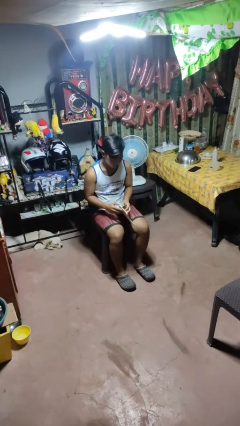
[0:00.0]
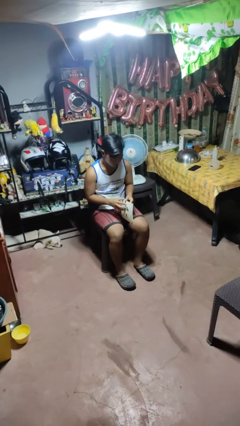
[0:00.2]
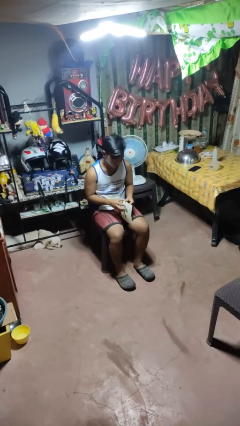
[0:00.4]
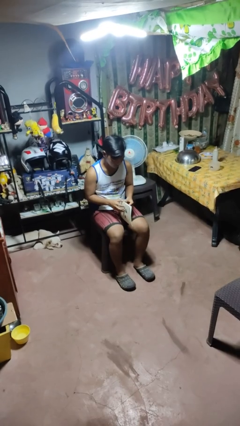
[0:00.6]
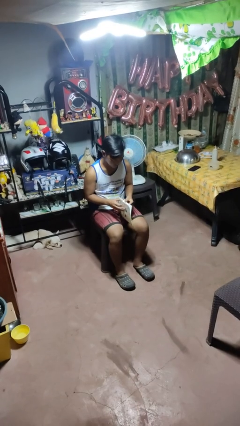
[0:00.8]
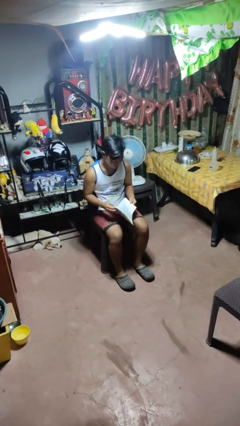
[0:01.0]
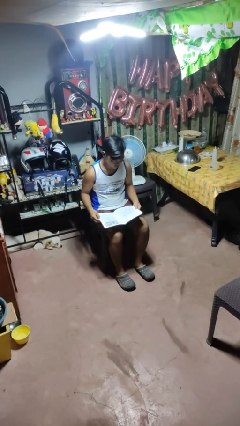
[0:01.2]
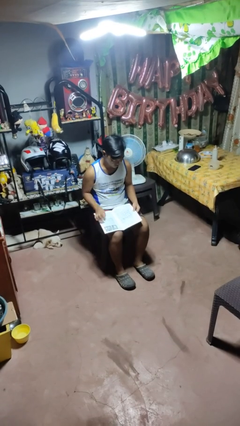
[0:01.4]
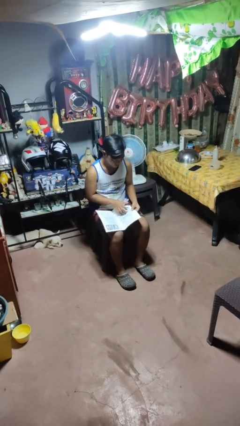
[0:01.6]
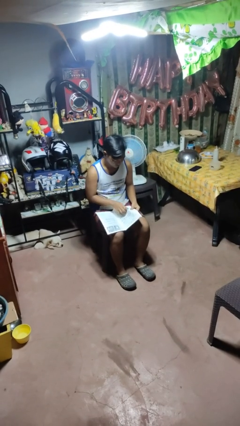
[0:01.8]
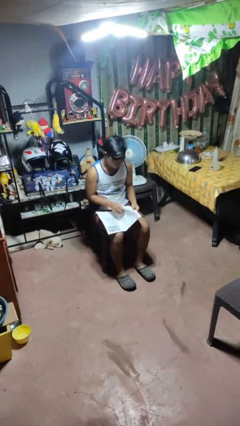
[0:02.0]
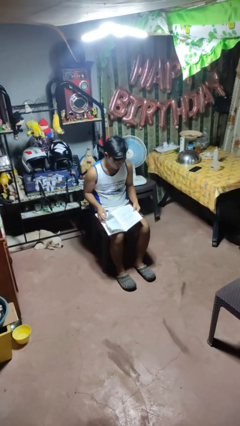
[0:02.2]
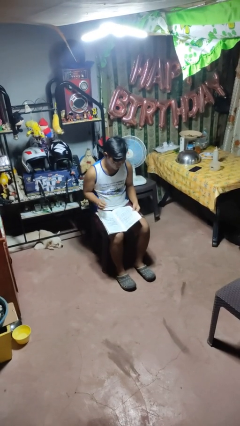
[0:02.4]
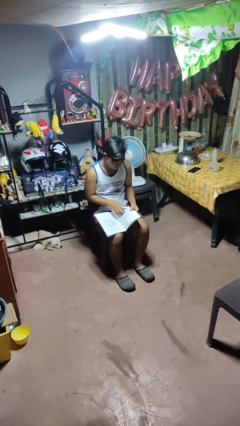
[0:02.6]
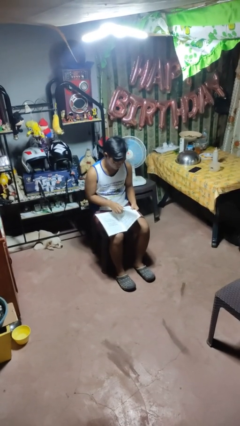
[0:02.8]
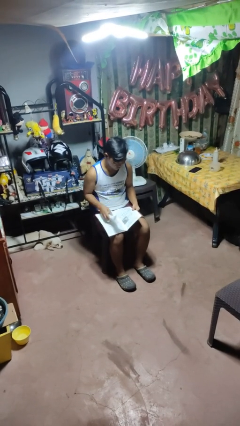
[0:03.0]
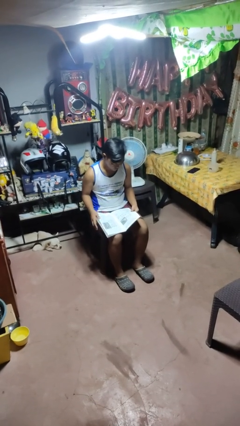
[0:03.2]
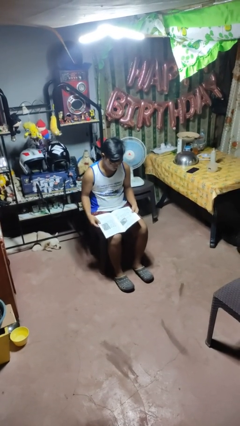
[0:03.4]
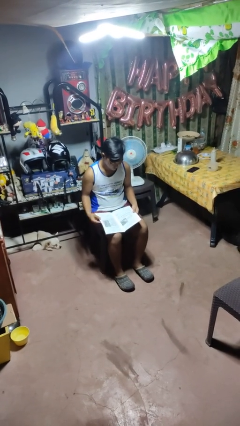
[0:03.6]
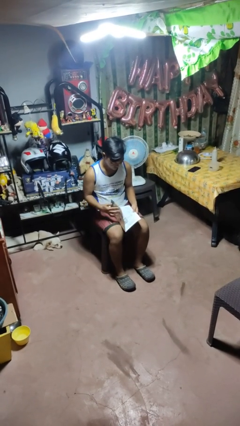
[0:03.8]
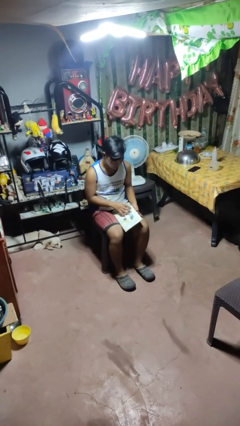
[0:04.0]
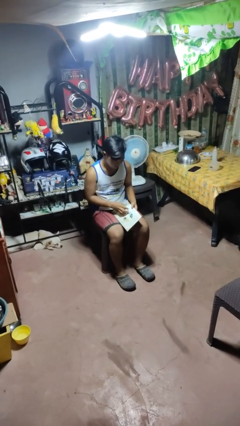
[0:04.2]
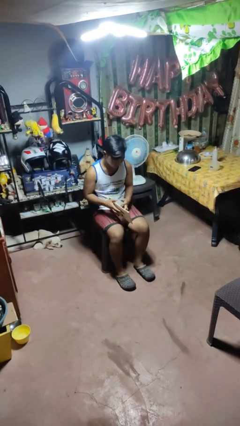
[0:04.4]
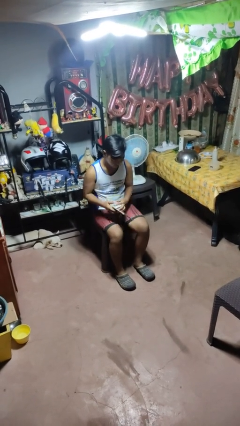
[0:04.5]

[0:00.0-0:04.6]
person reads magazine

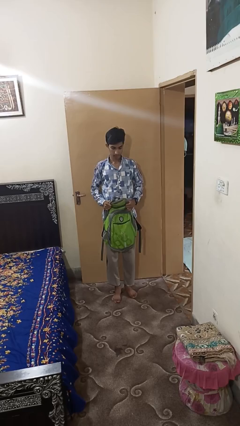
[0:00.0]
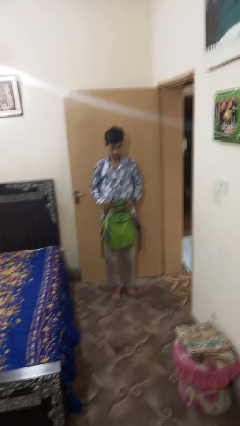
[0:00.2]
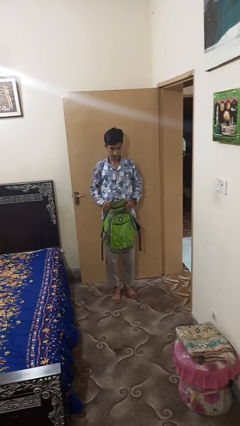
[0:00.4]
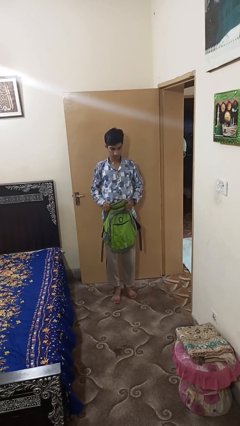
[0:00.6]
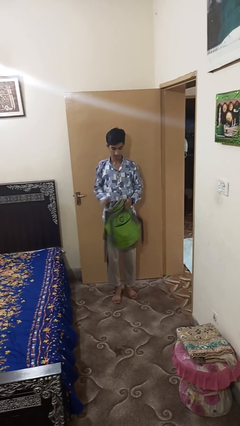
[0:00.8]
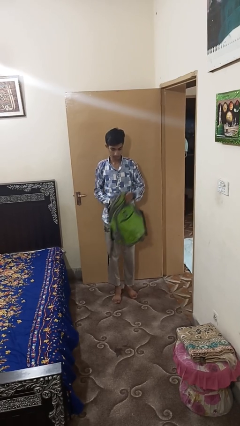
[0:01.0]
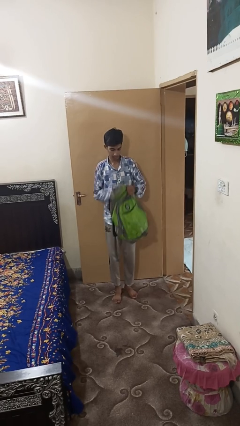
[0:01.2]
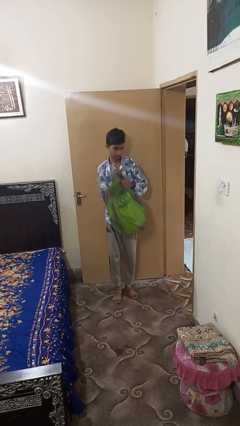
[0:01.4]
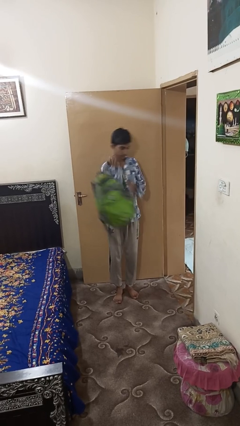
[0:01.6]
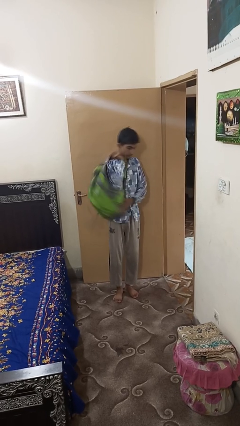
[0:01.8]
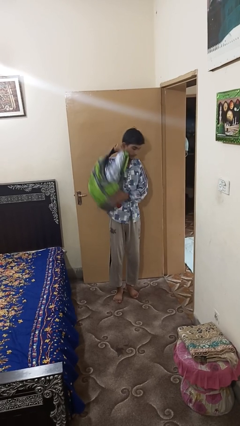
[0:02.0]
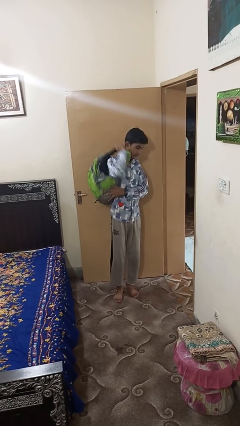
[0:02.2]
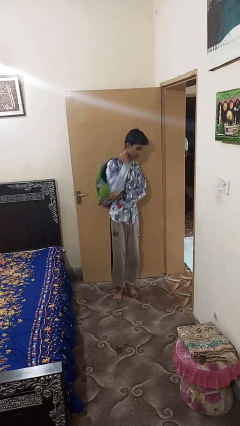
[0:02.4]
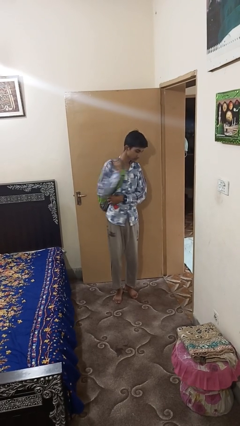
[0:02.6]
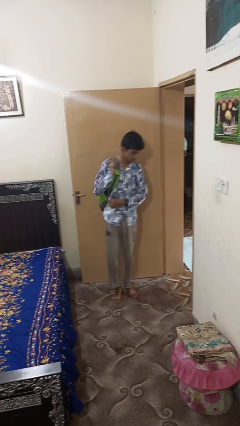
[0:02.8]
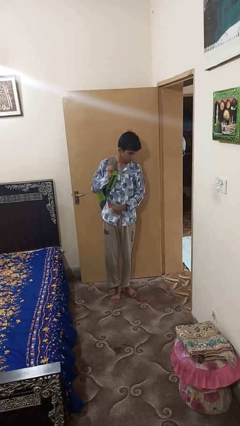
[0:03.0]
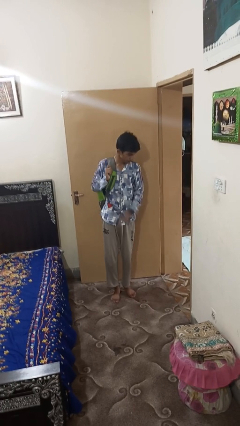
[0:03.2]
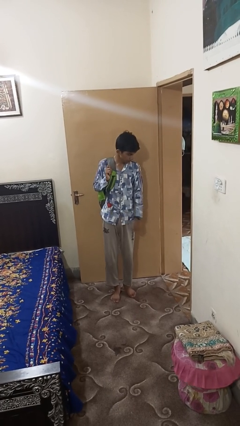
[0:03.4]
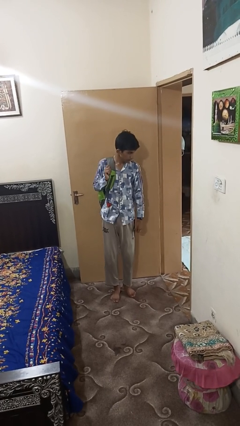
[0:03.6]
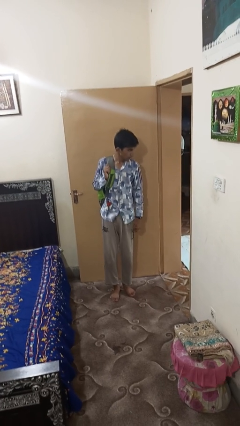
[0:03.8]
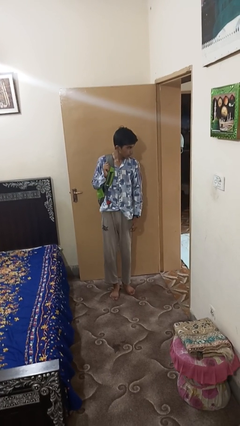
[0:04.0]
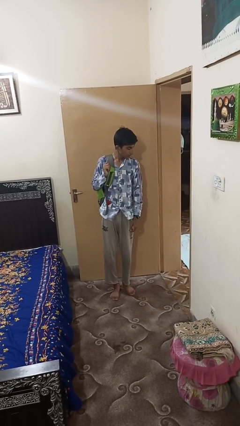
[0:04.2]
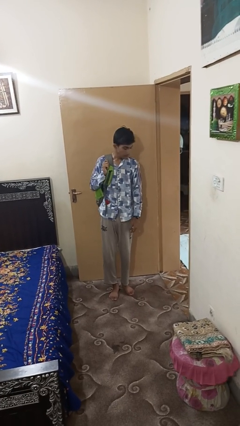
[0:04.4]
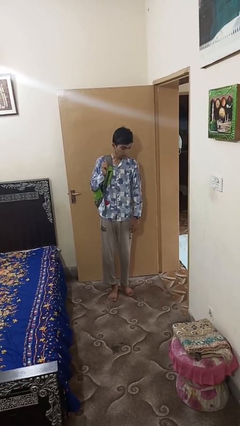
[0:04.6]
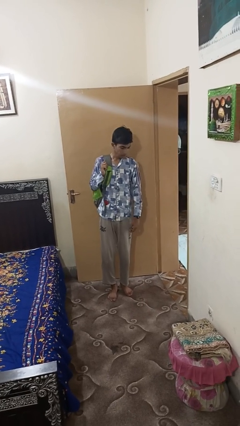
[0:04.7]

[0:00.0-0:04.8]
person puts on backpack

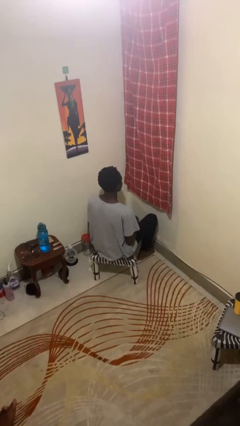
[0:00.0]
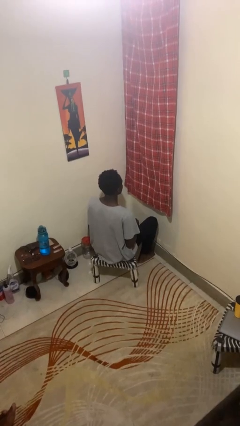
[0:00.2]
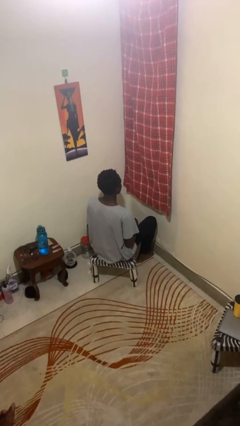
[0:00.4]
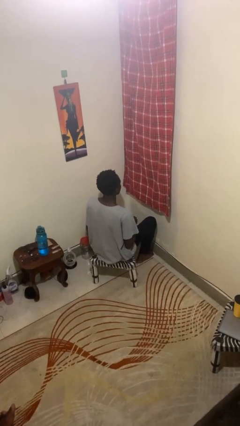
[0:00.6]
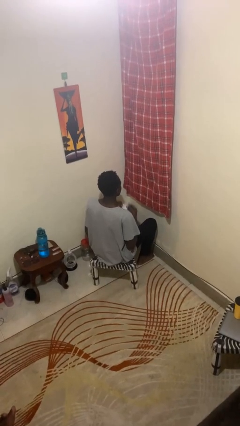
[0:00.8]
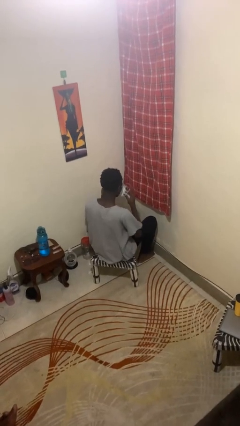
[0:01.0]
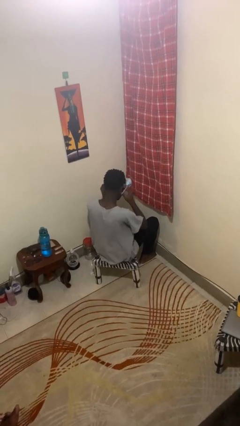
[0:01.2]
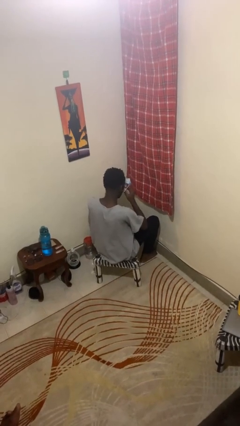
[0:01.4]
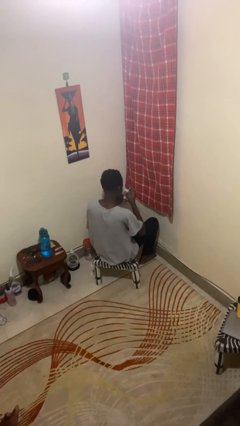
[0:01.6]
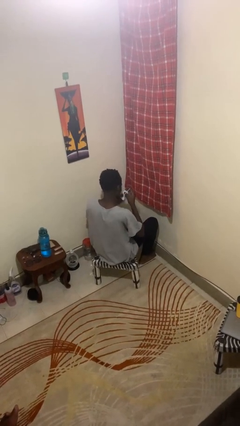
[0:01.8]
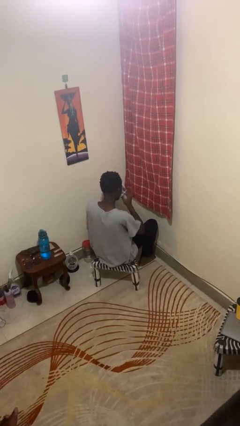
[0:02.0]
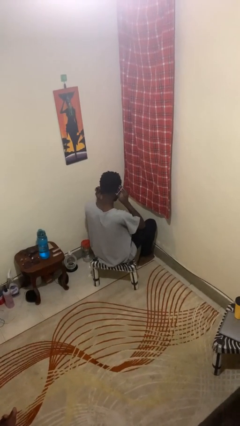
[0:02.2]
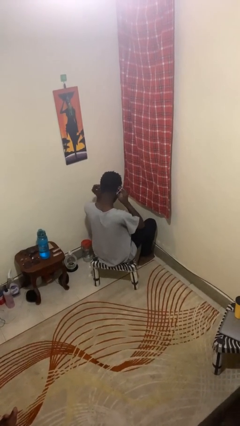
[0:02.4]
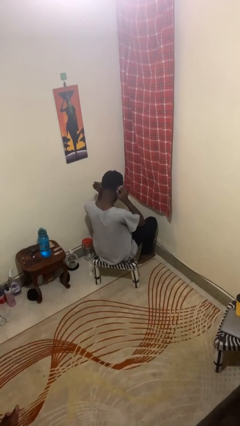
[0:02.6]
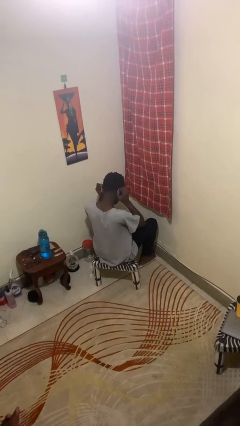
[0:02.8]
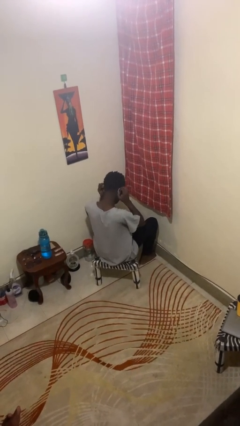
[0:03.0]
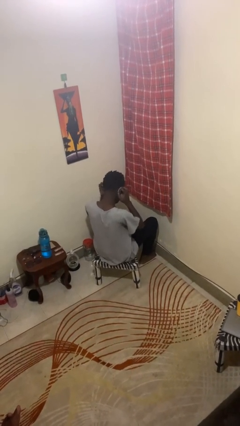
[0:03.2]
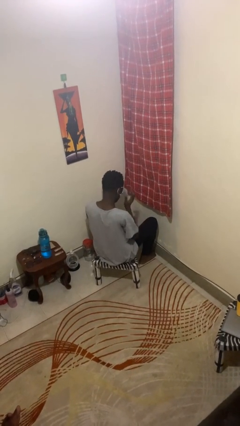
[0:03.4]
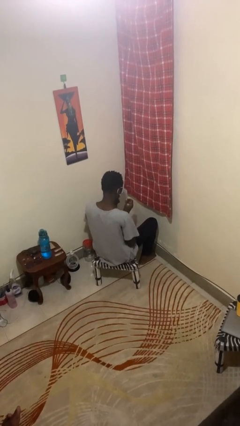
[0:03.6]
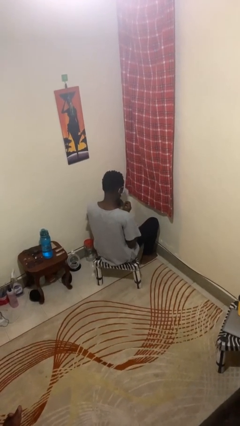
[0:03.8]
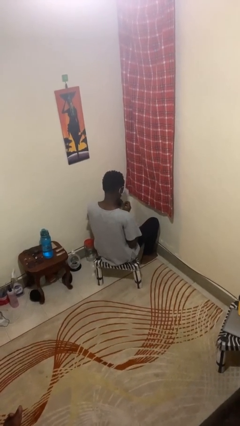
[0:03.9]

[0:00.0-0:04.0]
person puts on facemask

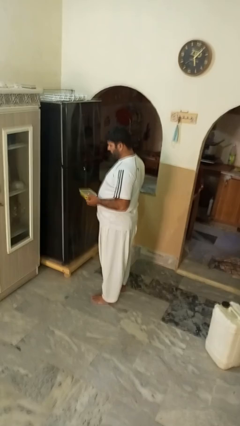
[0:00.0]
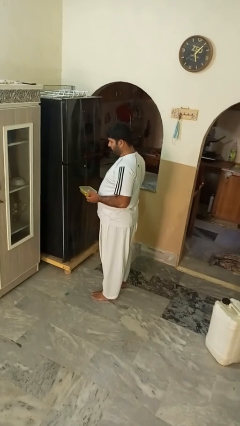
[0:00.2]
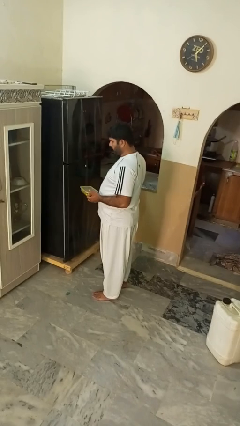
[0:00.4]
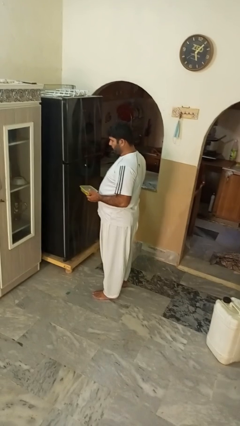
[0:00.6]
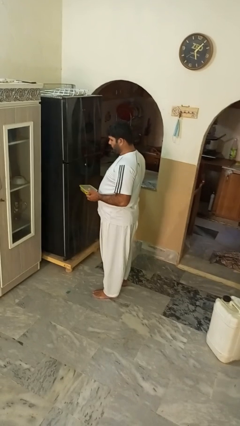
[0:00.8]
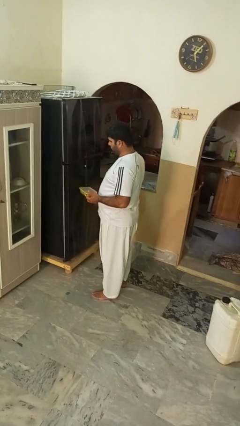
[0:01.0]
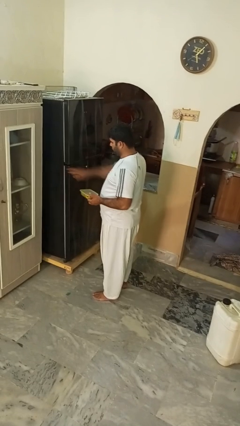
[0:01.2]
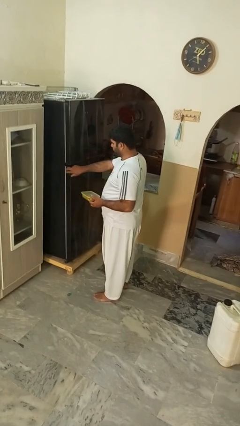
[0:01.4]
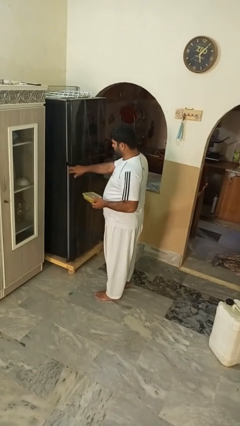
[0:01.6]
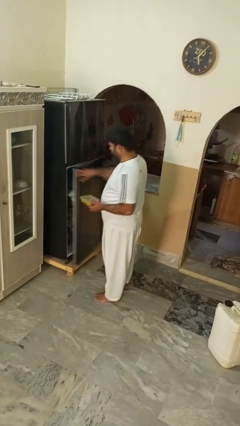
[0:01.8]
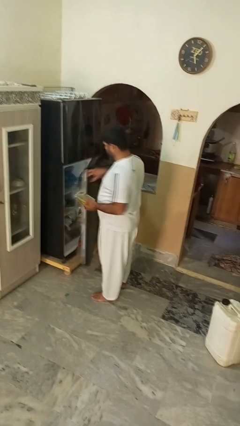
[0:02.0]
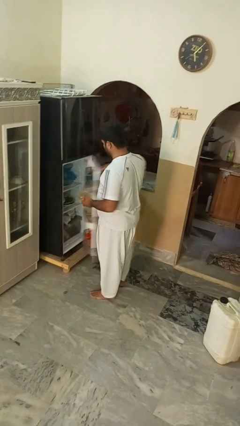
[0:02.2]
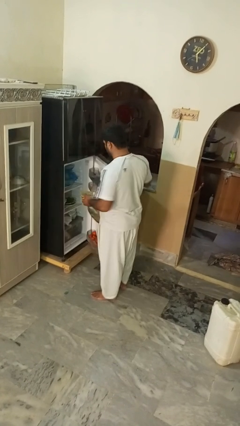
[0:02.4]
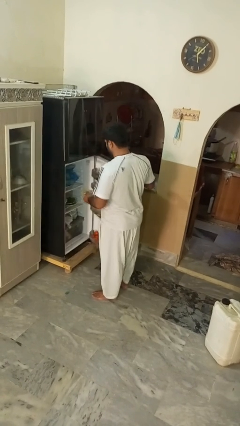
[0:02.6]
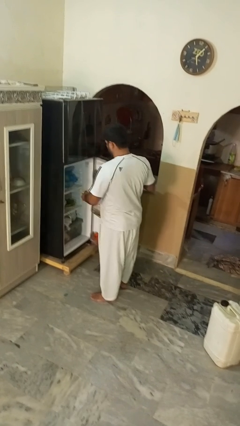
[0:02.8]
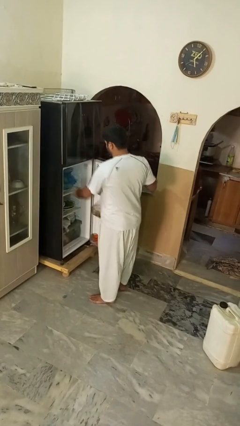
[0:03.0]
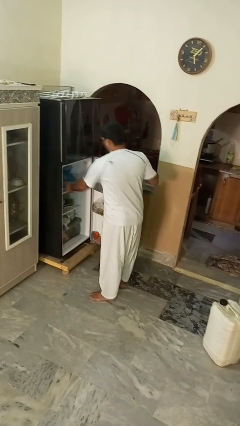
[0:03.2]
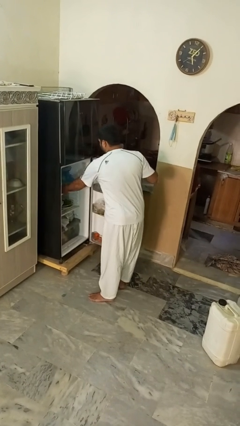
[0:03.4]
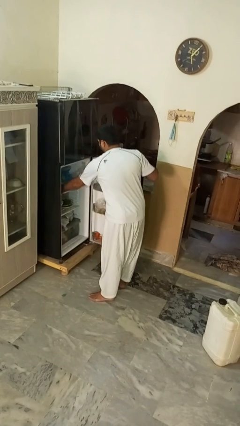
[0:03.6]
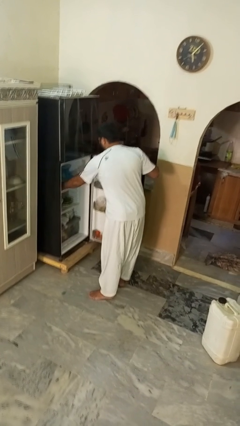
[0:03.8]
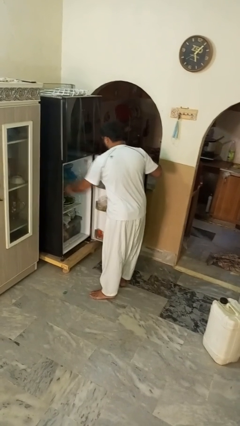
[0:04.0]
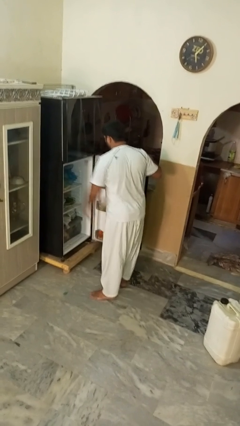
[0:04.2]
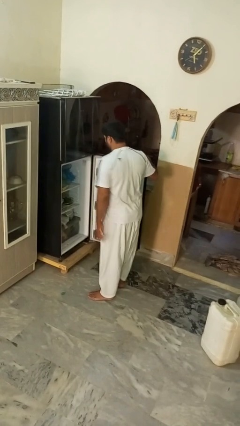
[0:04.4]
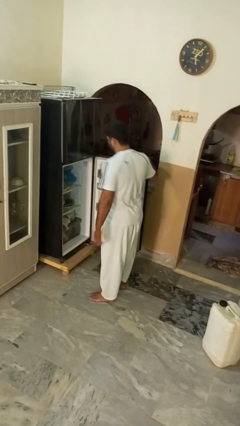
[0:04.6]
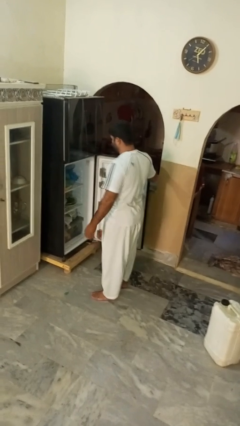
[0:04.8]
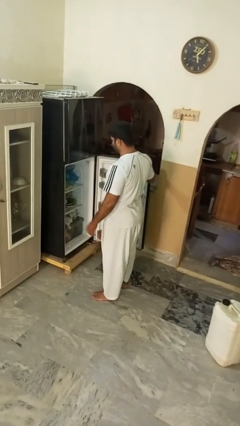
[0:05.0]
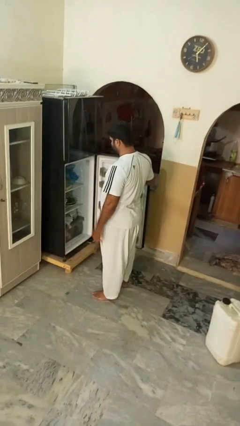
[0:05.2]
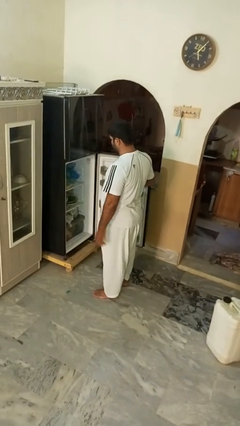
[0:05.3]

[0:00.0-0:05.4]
person puts object into refrigerator
